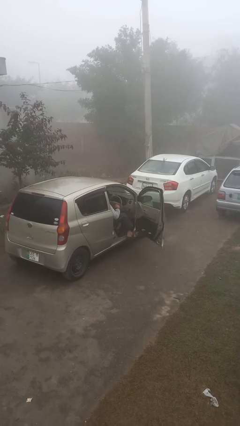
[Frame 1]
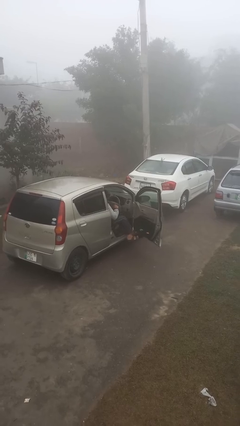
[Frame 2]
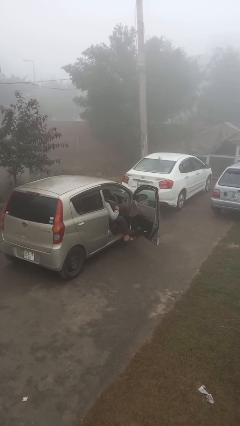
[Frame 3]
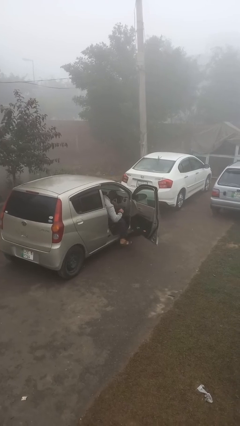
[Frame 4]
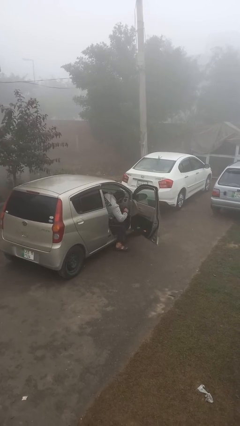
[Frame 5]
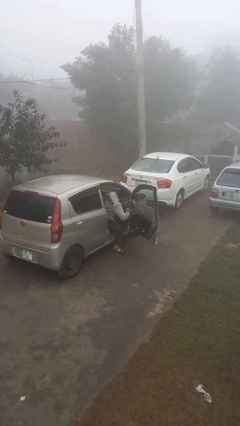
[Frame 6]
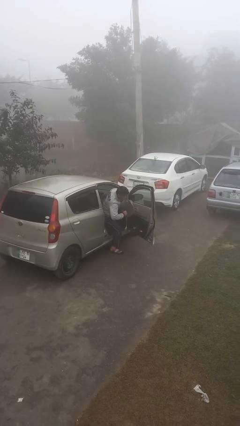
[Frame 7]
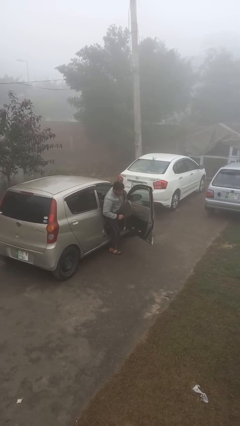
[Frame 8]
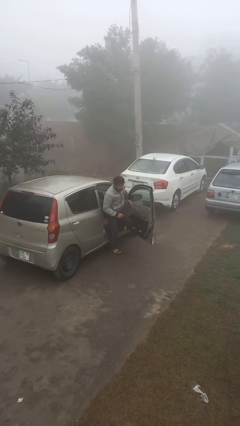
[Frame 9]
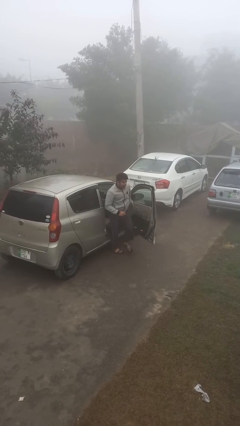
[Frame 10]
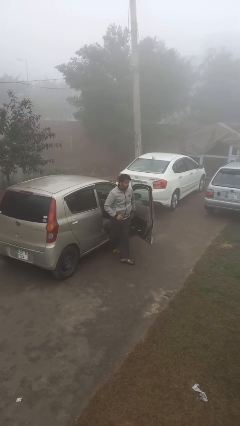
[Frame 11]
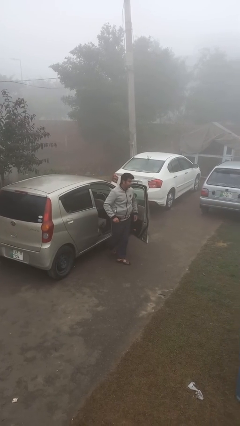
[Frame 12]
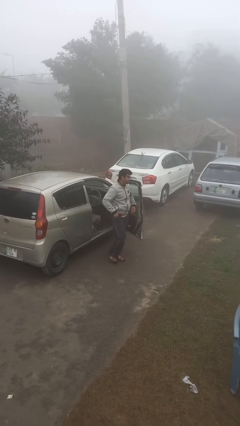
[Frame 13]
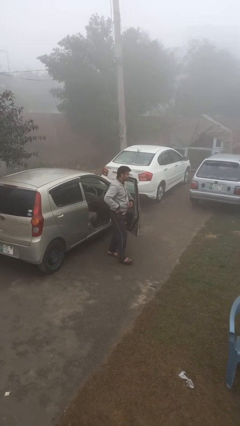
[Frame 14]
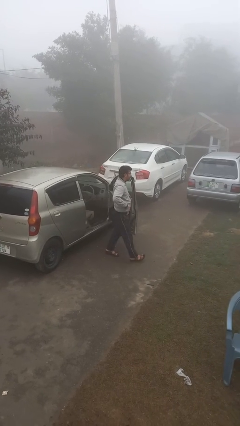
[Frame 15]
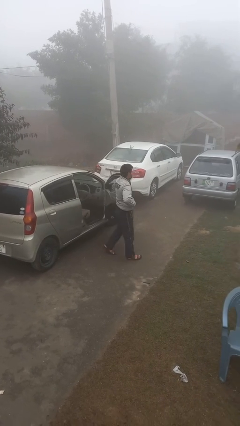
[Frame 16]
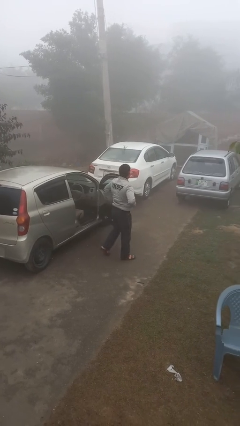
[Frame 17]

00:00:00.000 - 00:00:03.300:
person exits car

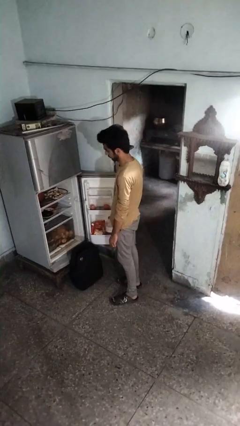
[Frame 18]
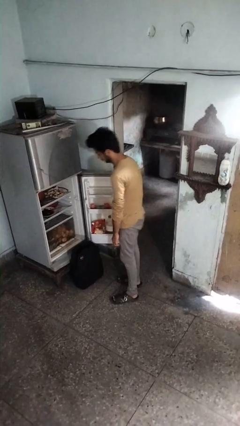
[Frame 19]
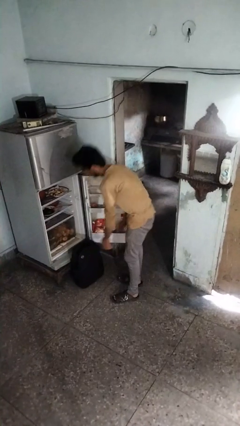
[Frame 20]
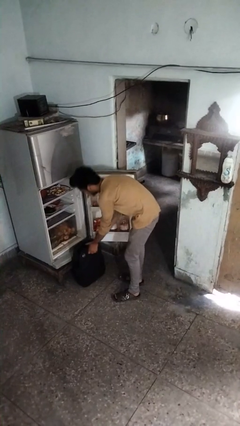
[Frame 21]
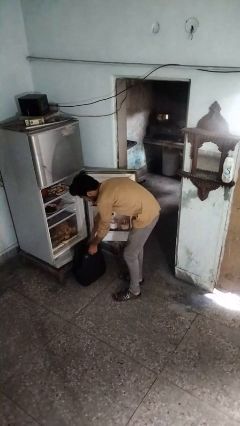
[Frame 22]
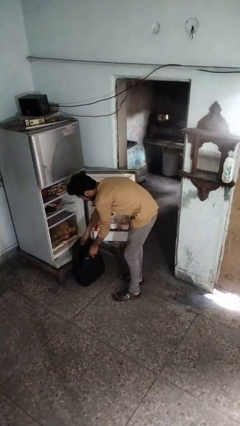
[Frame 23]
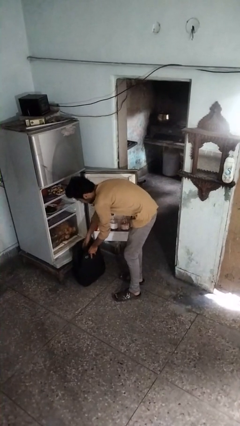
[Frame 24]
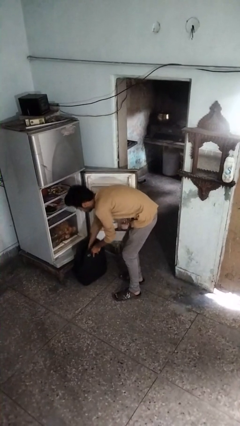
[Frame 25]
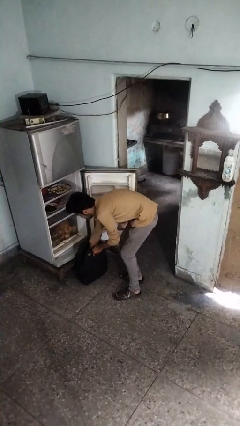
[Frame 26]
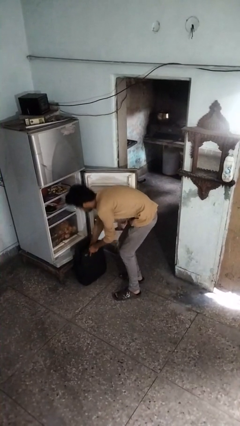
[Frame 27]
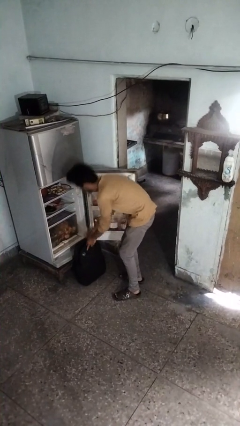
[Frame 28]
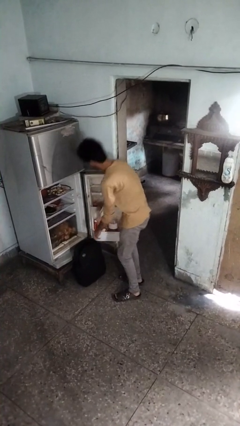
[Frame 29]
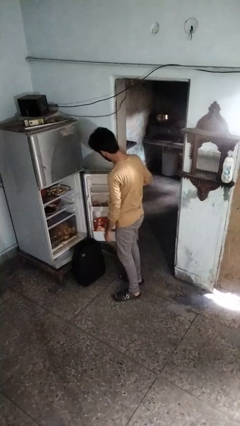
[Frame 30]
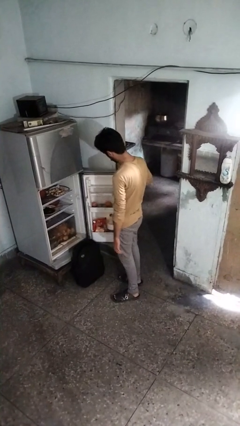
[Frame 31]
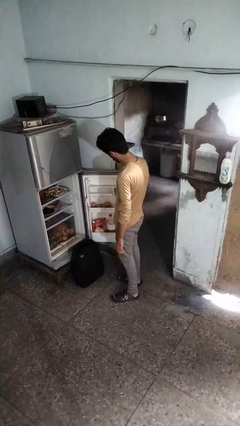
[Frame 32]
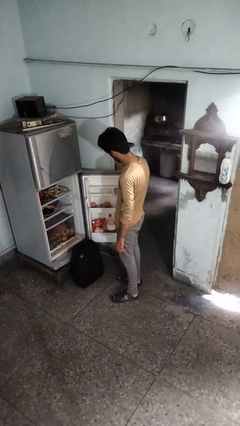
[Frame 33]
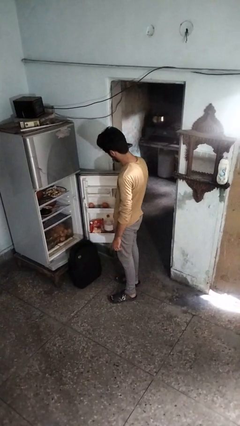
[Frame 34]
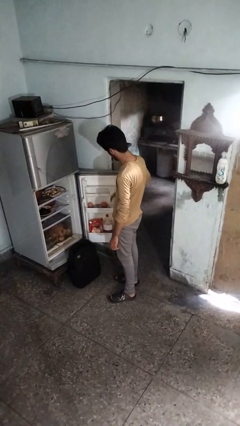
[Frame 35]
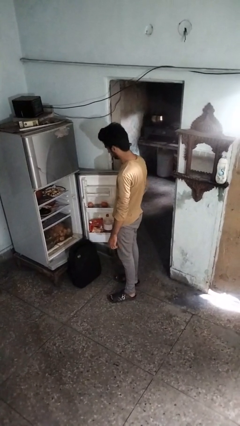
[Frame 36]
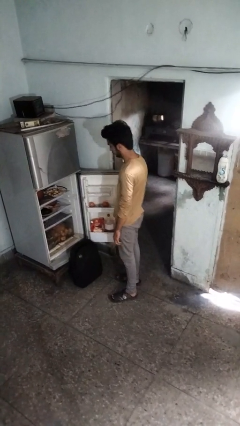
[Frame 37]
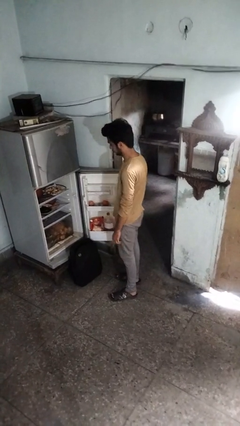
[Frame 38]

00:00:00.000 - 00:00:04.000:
person loads groceries into refrigerator

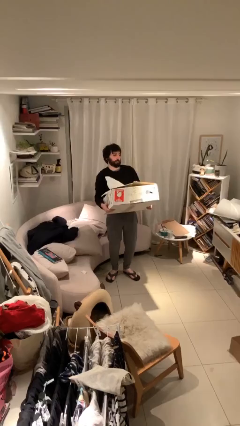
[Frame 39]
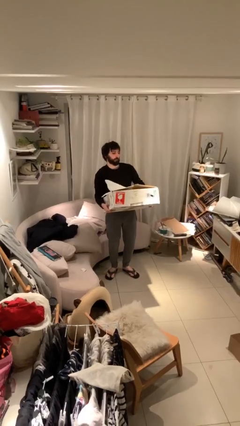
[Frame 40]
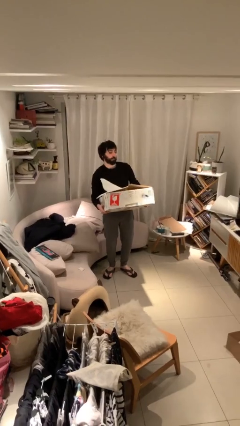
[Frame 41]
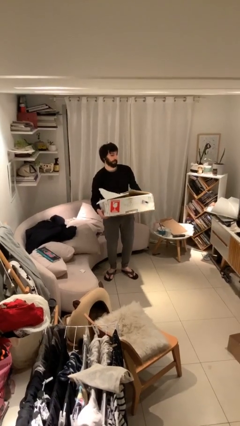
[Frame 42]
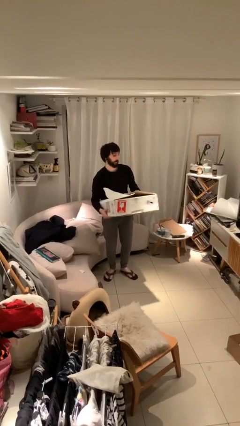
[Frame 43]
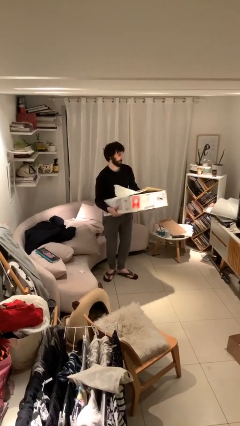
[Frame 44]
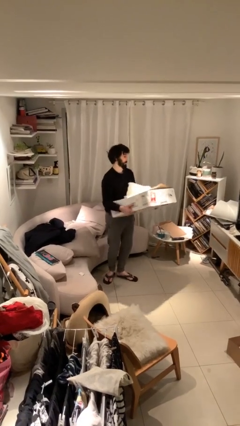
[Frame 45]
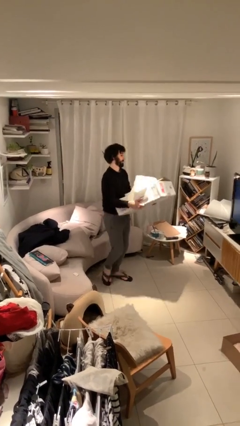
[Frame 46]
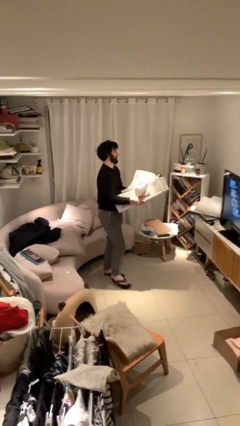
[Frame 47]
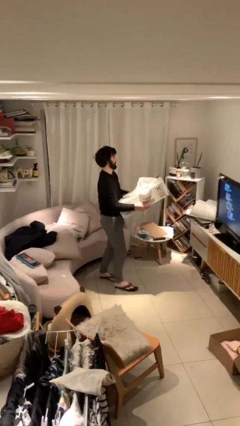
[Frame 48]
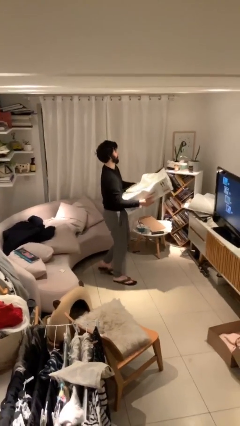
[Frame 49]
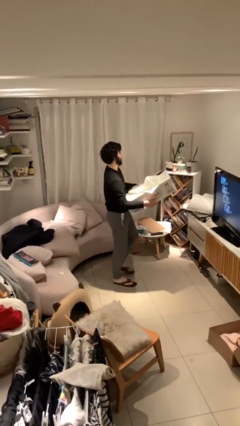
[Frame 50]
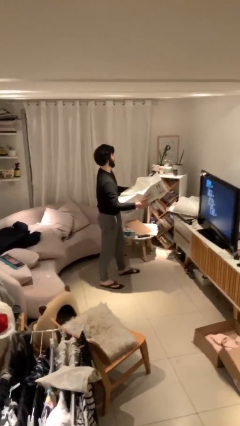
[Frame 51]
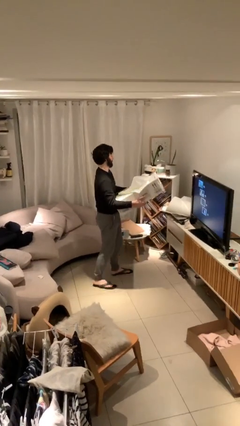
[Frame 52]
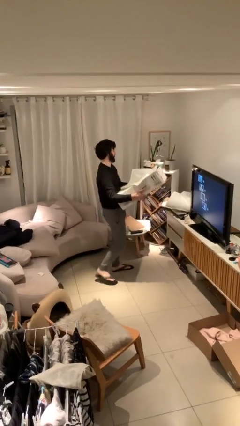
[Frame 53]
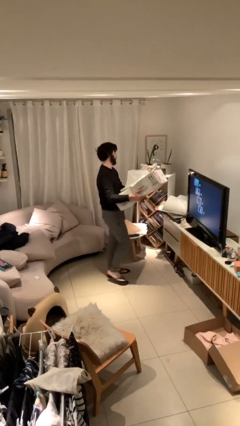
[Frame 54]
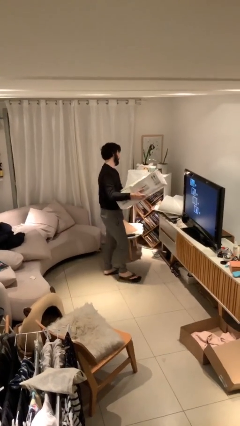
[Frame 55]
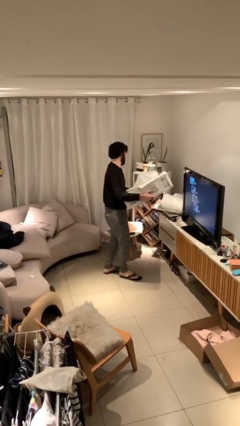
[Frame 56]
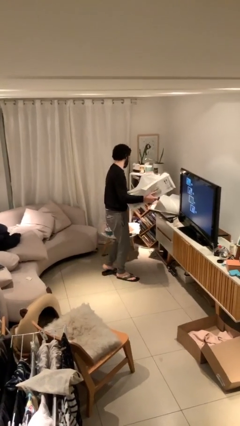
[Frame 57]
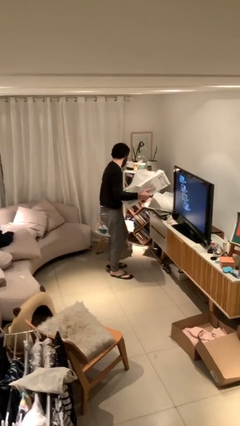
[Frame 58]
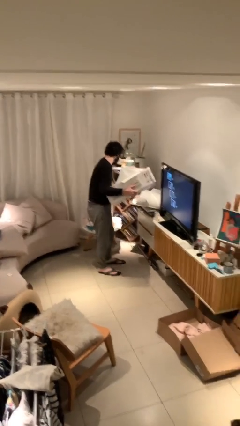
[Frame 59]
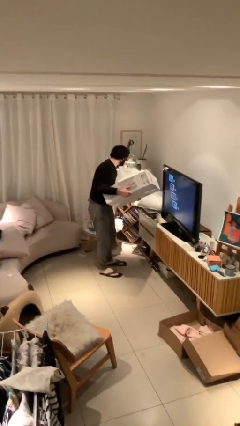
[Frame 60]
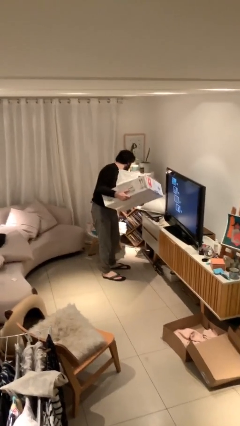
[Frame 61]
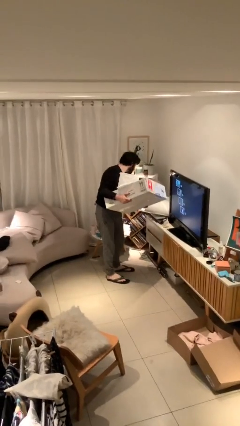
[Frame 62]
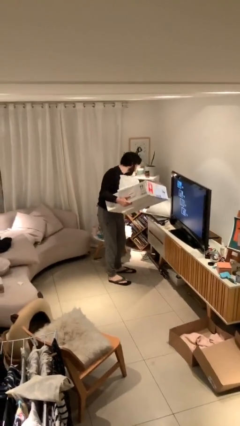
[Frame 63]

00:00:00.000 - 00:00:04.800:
person carries heavy object

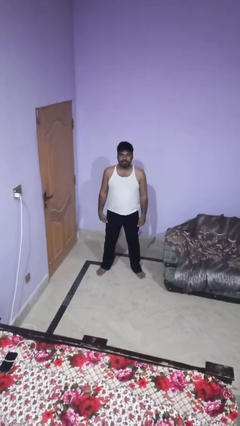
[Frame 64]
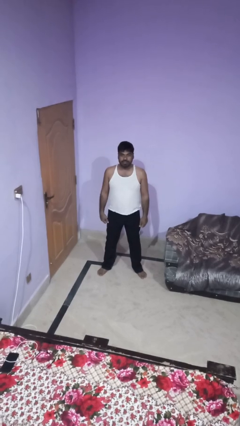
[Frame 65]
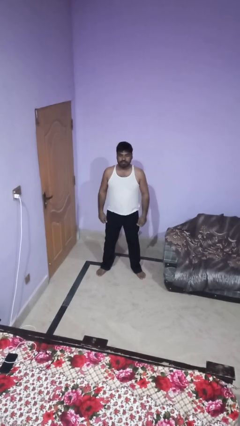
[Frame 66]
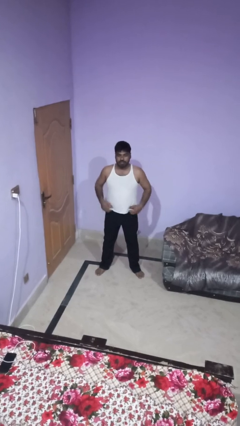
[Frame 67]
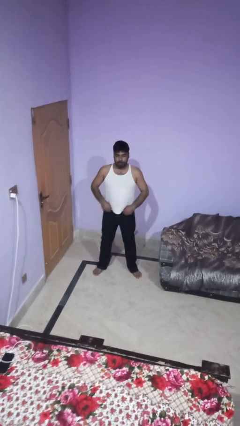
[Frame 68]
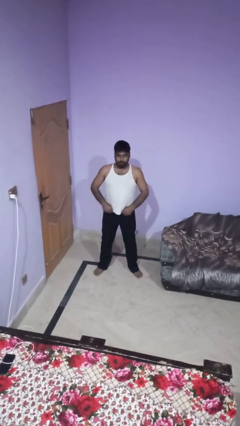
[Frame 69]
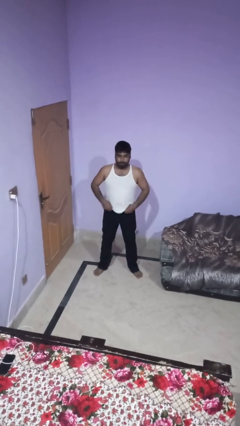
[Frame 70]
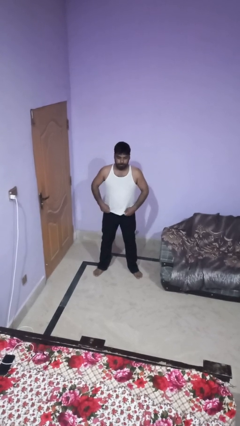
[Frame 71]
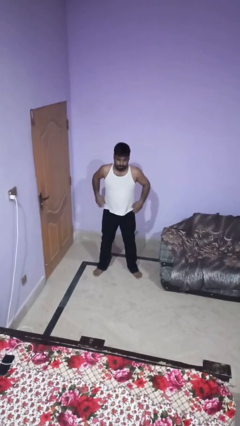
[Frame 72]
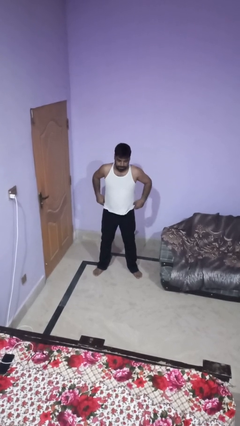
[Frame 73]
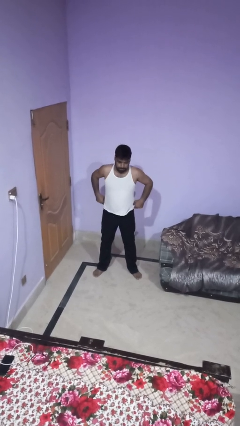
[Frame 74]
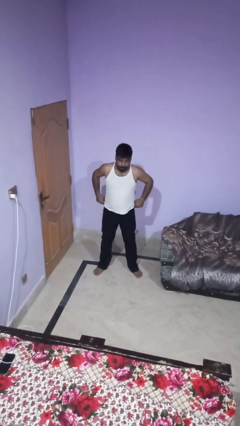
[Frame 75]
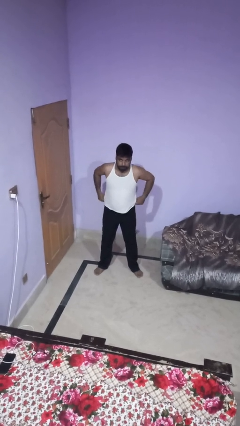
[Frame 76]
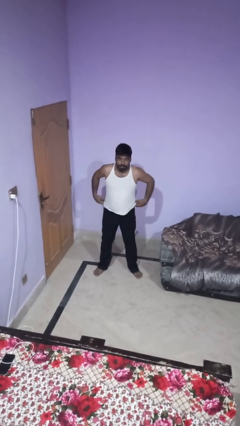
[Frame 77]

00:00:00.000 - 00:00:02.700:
person hikes up pants

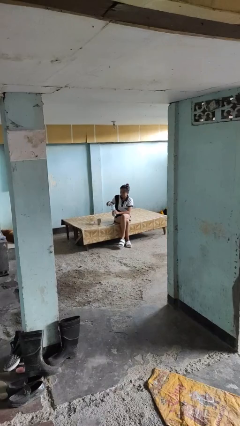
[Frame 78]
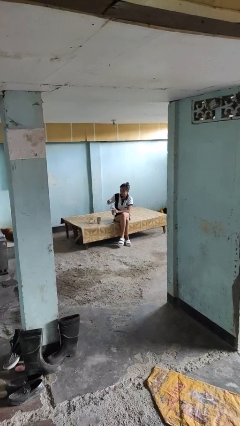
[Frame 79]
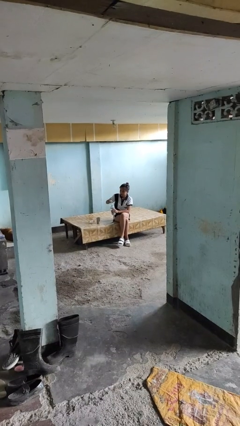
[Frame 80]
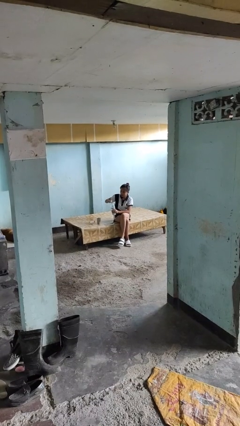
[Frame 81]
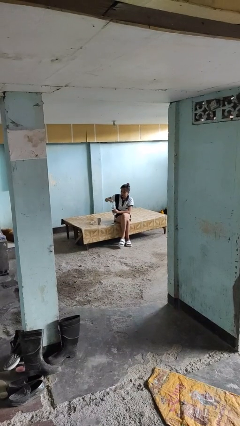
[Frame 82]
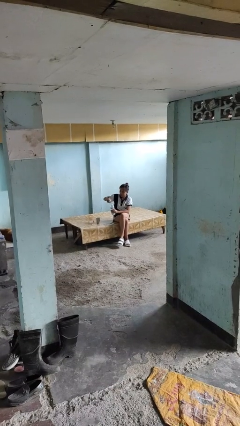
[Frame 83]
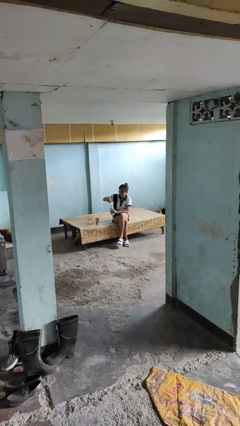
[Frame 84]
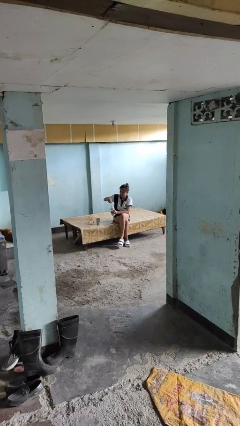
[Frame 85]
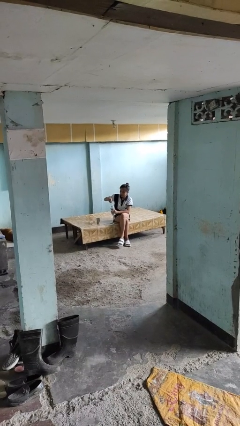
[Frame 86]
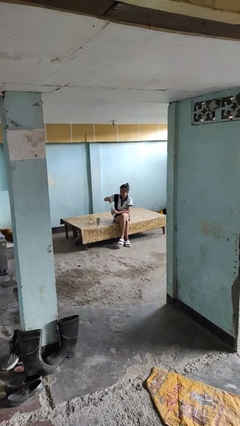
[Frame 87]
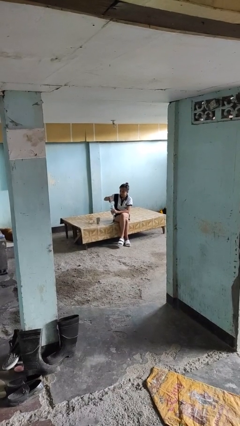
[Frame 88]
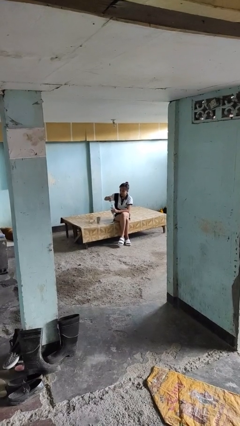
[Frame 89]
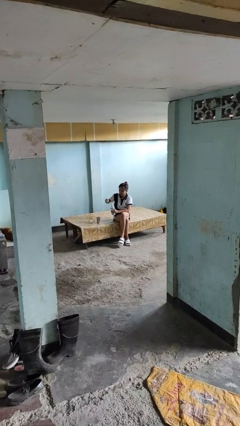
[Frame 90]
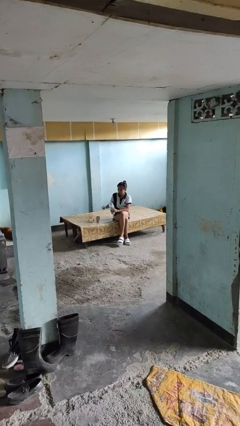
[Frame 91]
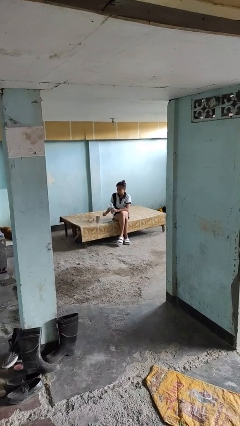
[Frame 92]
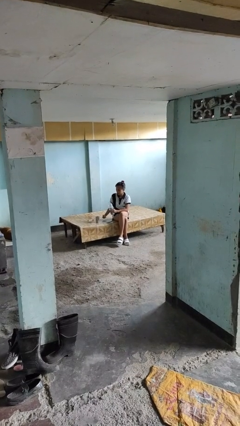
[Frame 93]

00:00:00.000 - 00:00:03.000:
person unscrews lid from bottle

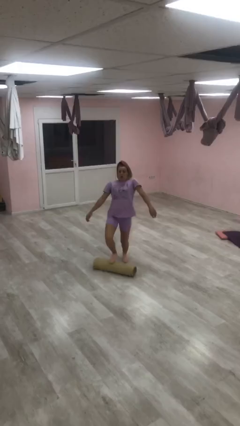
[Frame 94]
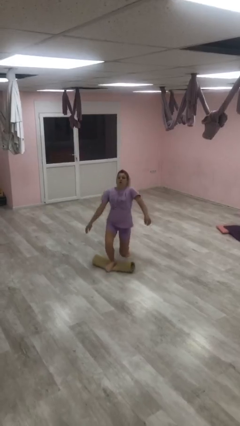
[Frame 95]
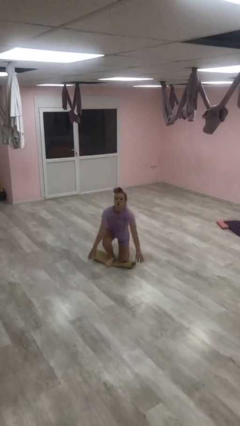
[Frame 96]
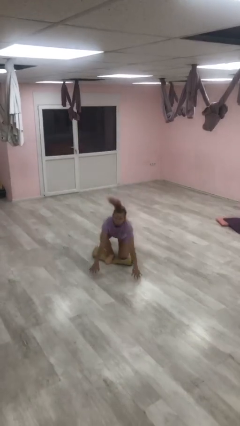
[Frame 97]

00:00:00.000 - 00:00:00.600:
person trips on object on floor
